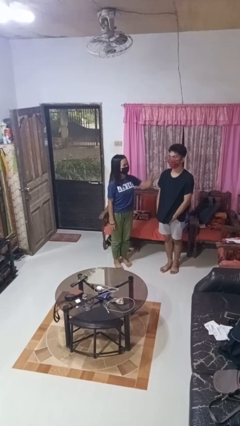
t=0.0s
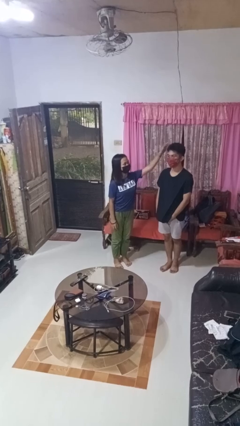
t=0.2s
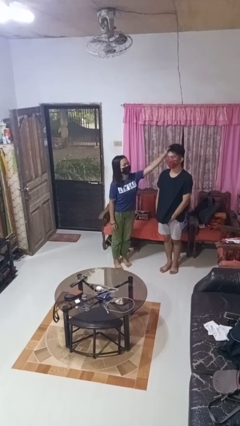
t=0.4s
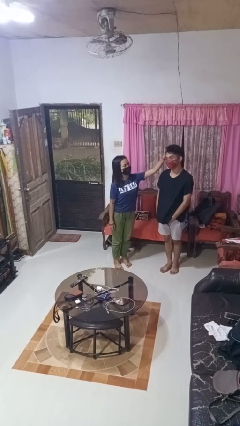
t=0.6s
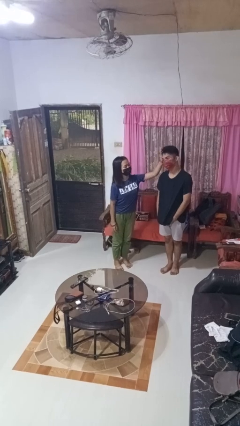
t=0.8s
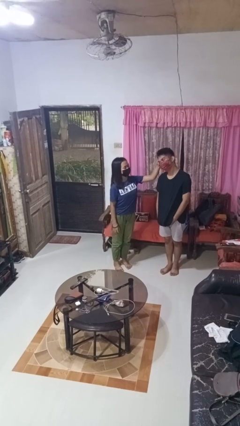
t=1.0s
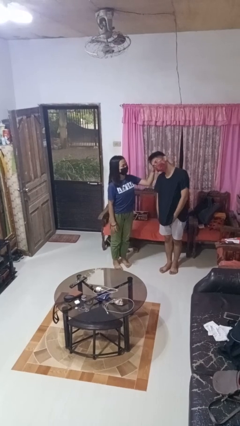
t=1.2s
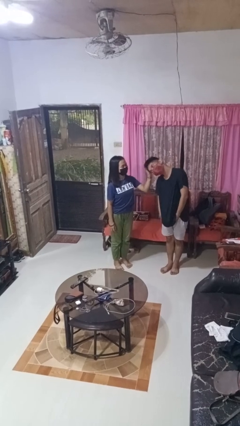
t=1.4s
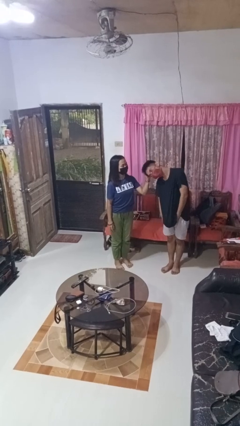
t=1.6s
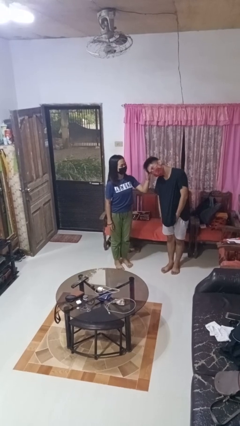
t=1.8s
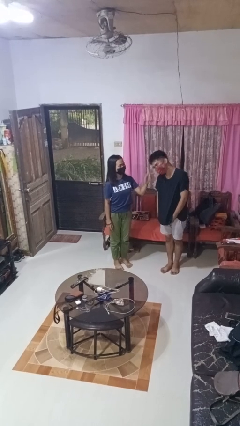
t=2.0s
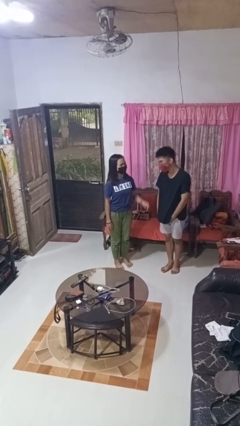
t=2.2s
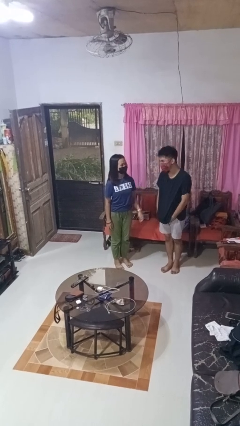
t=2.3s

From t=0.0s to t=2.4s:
person grabs person by hair

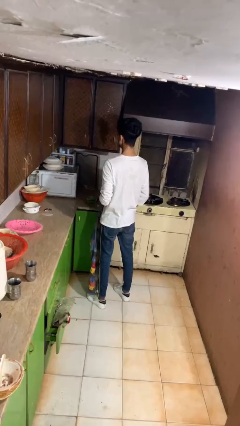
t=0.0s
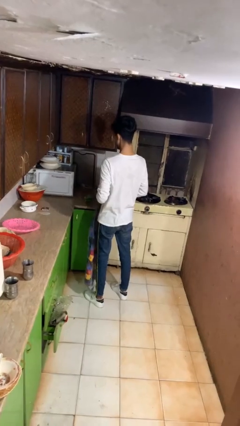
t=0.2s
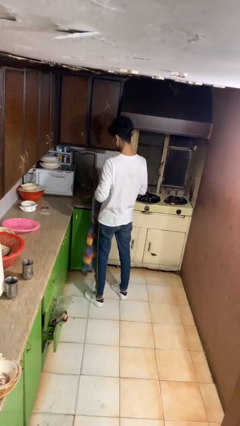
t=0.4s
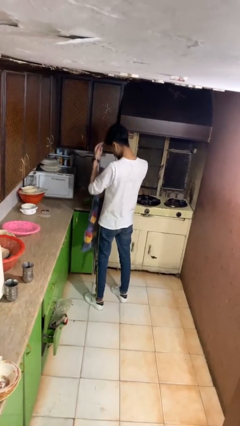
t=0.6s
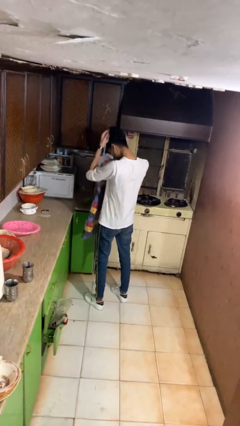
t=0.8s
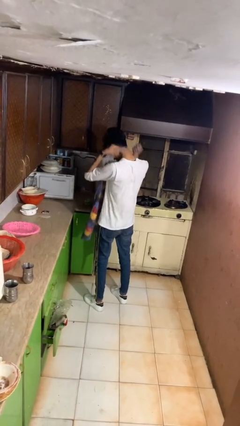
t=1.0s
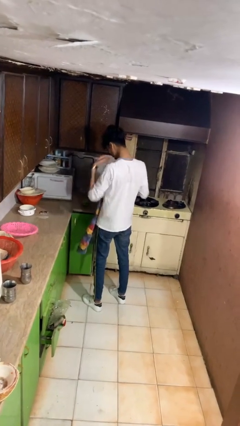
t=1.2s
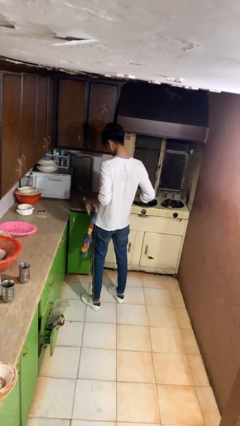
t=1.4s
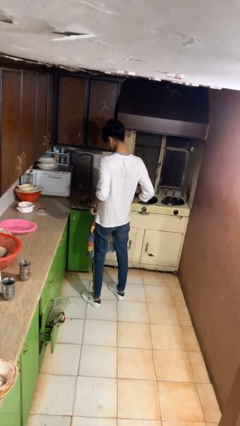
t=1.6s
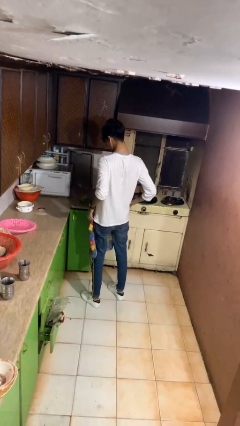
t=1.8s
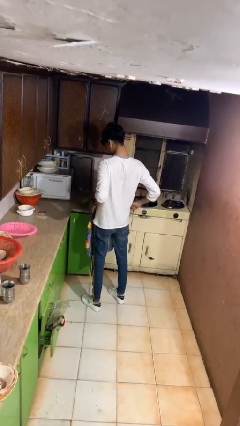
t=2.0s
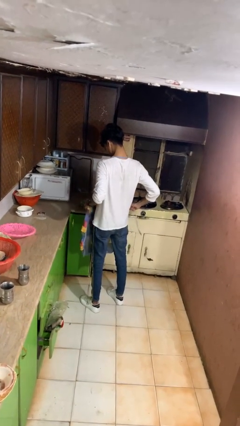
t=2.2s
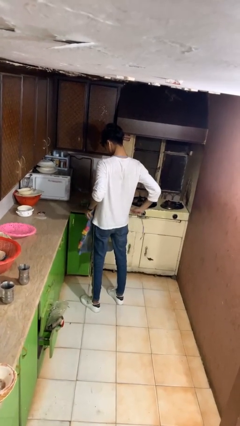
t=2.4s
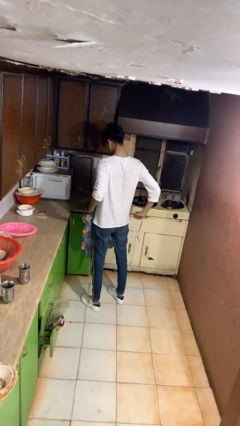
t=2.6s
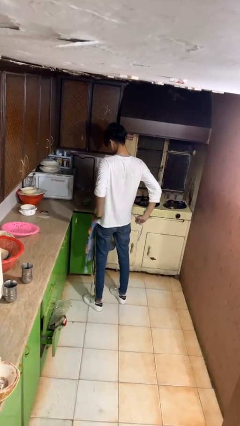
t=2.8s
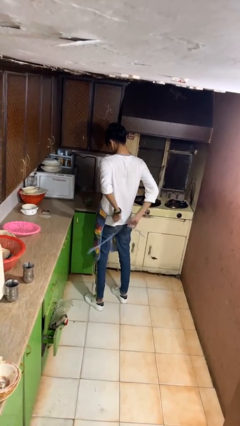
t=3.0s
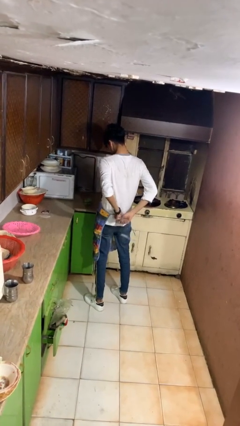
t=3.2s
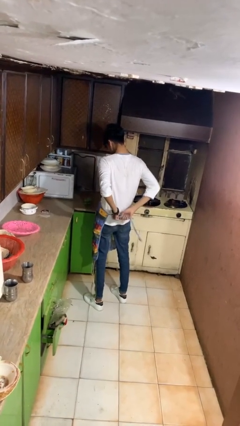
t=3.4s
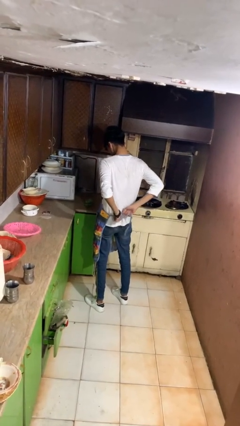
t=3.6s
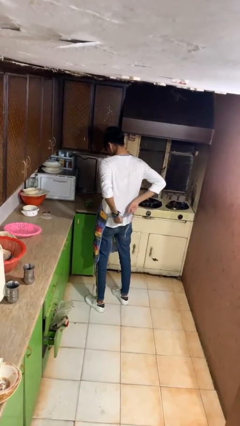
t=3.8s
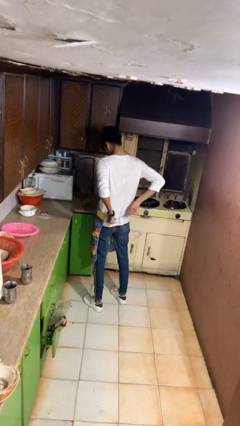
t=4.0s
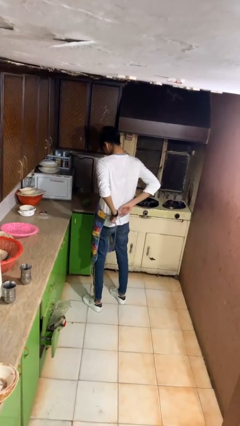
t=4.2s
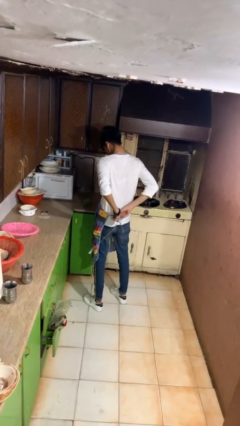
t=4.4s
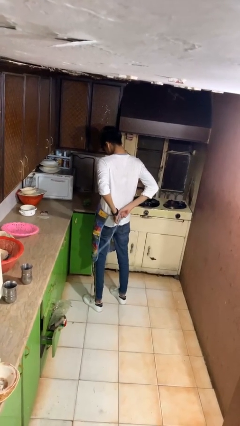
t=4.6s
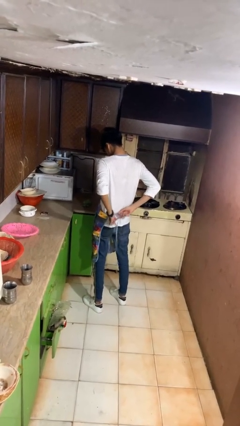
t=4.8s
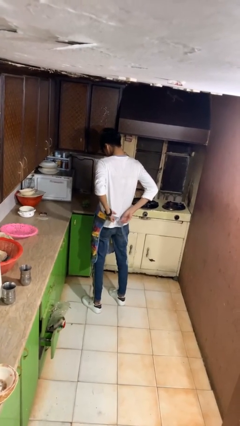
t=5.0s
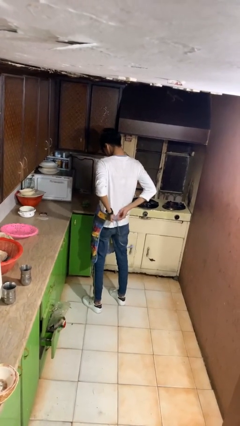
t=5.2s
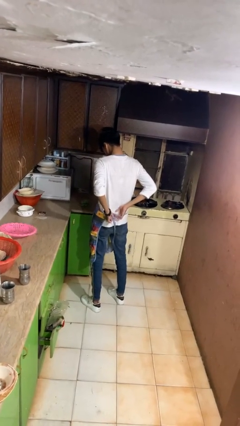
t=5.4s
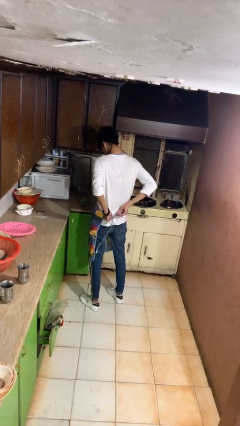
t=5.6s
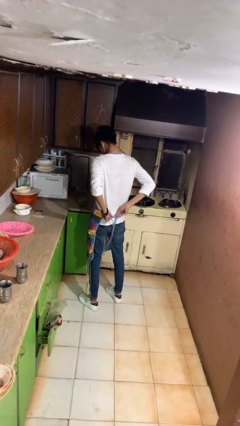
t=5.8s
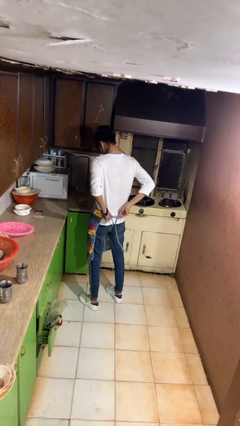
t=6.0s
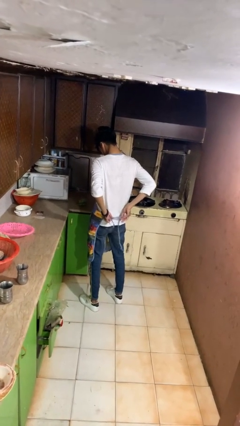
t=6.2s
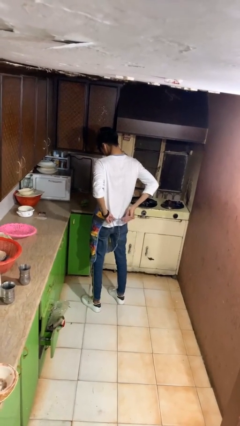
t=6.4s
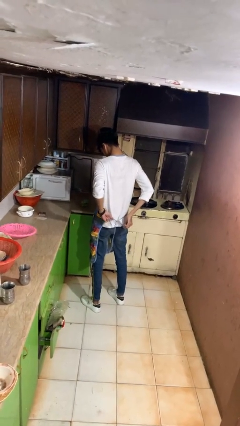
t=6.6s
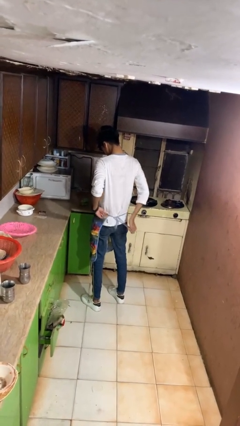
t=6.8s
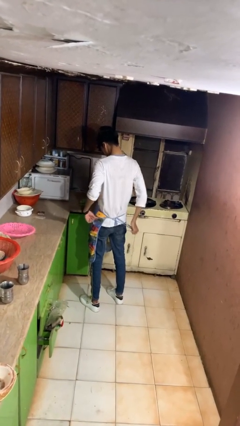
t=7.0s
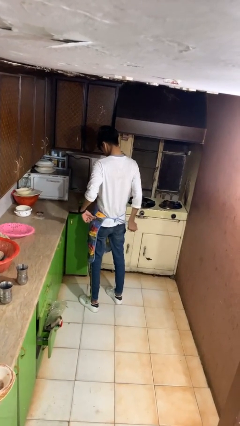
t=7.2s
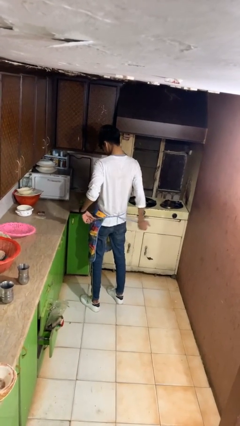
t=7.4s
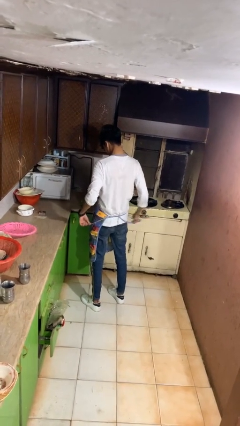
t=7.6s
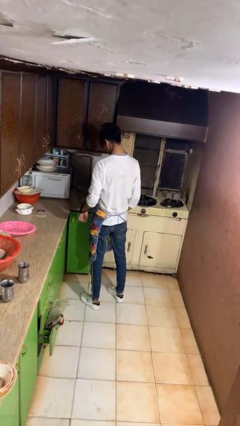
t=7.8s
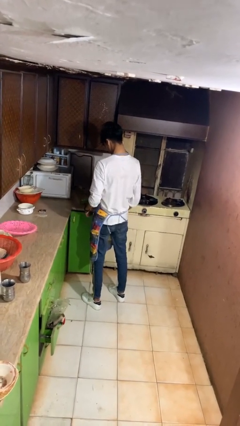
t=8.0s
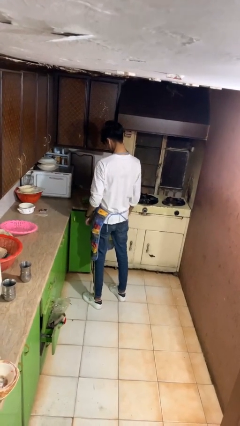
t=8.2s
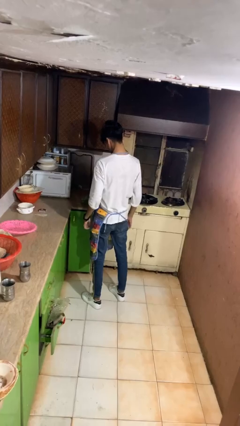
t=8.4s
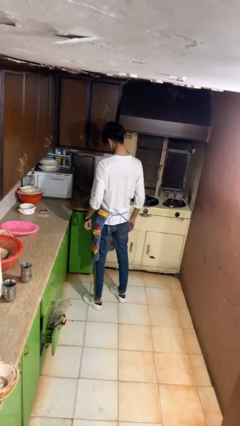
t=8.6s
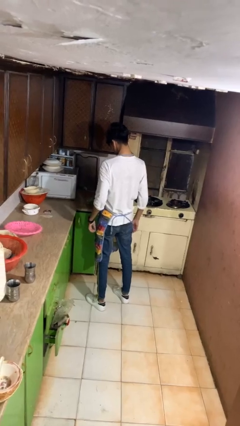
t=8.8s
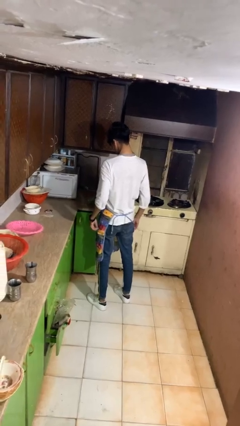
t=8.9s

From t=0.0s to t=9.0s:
person puts on apron

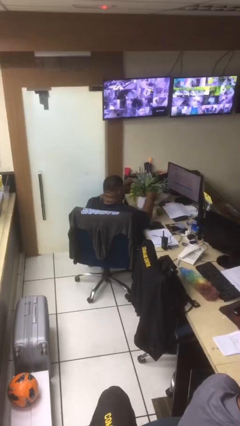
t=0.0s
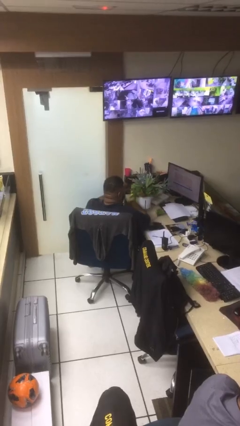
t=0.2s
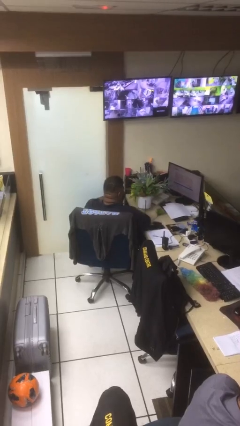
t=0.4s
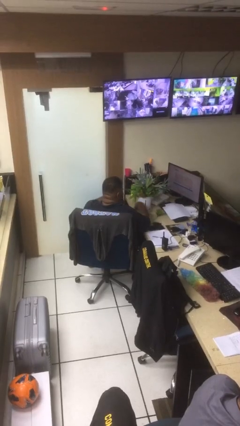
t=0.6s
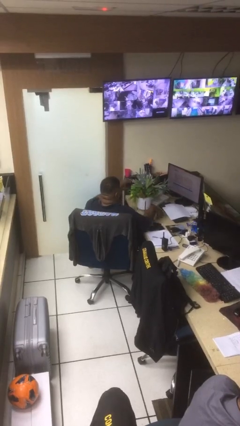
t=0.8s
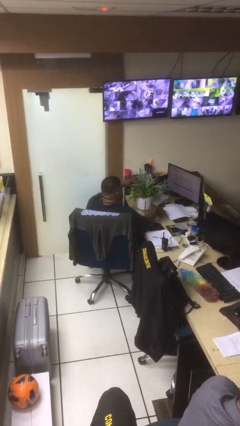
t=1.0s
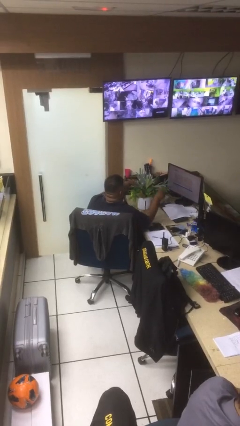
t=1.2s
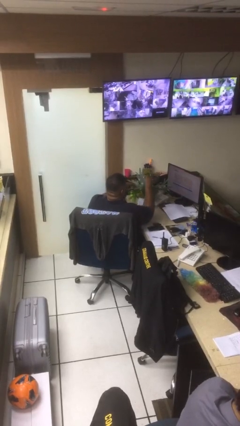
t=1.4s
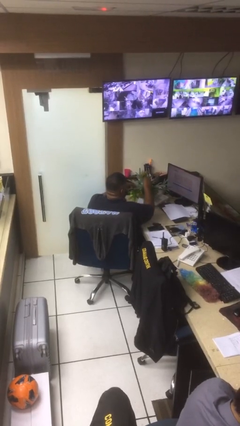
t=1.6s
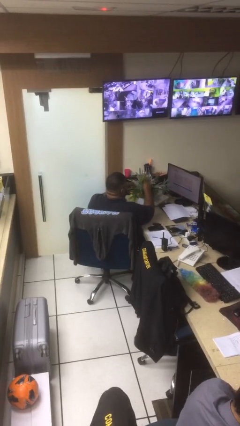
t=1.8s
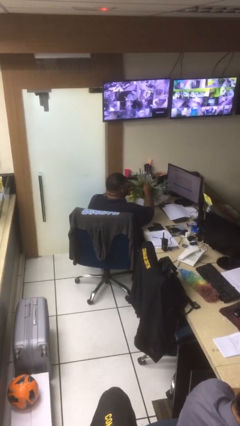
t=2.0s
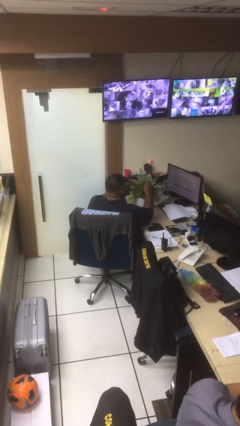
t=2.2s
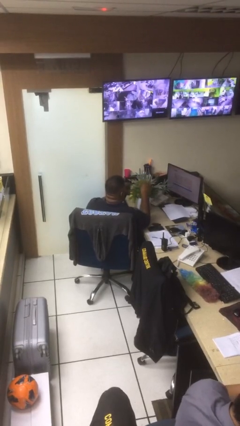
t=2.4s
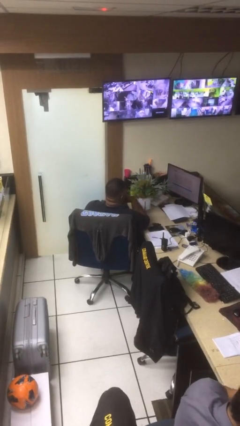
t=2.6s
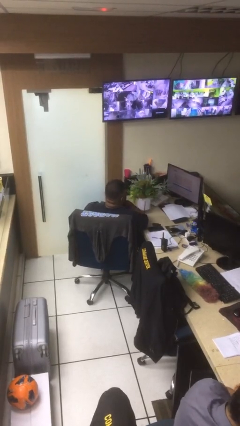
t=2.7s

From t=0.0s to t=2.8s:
person arranges flowers in vase

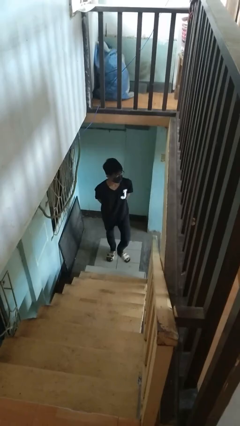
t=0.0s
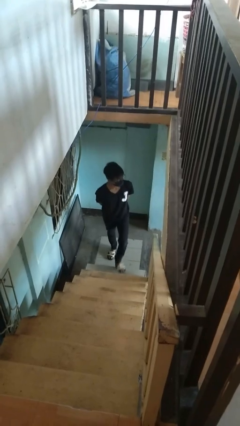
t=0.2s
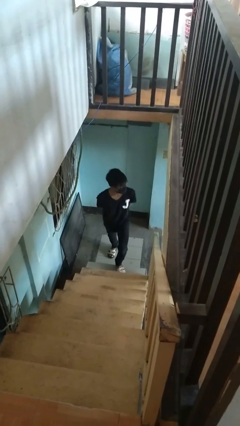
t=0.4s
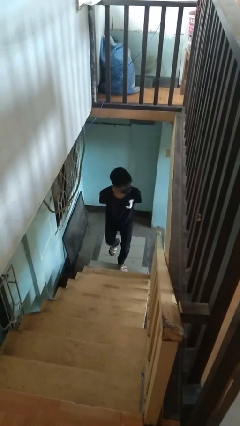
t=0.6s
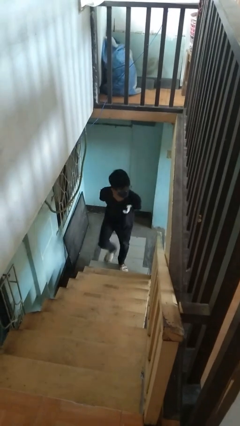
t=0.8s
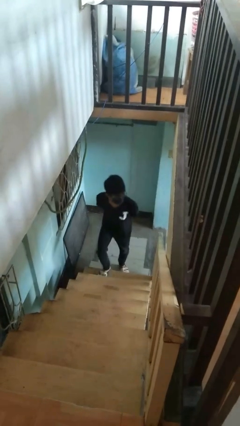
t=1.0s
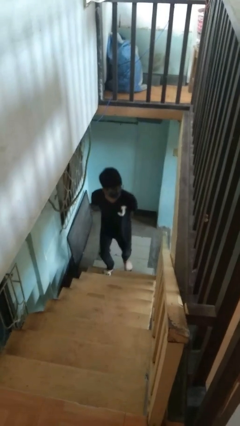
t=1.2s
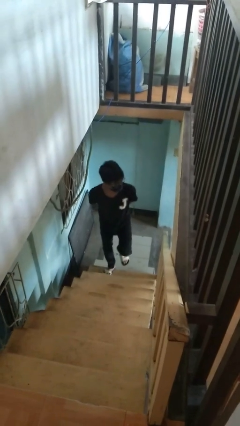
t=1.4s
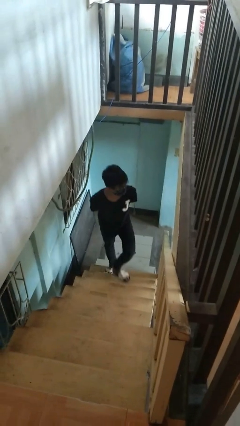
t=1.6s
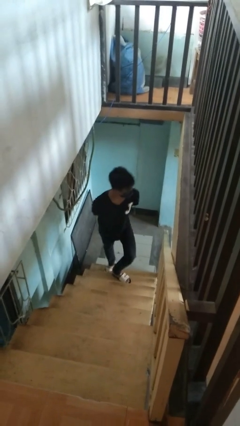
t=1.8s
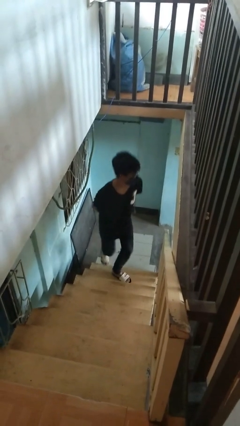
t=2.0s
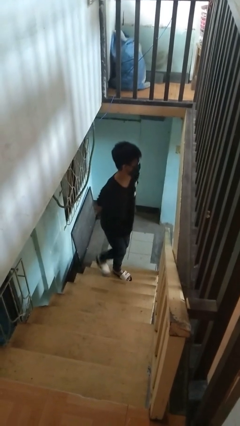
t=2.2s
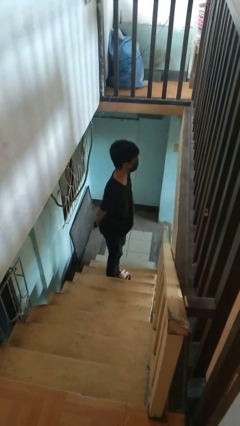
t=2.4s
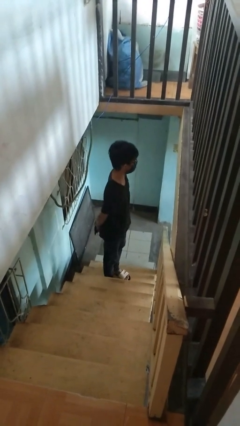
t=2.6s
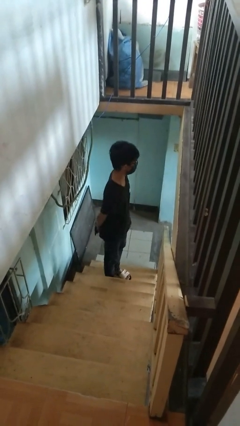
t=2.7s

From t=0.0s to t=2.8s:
person climbs up ladder

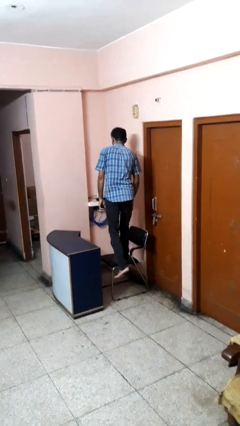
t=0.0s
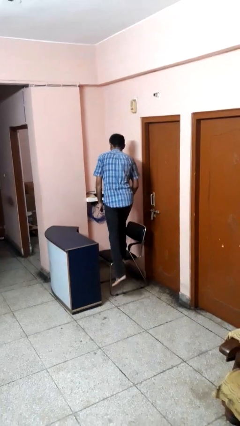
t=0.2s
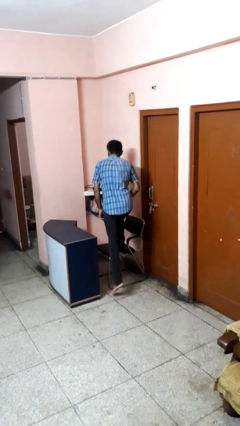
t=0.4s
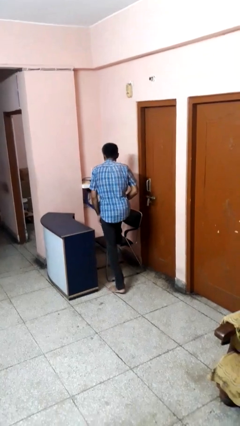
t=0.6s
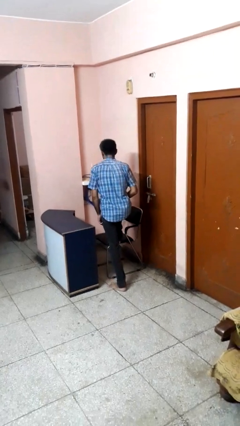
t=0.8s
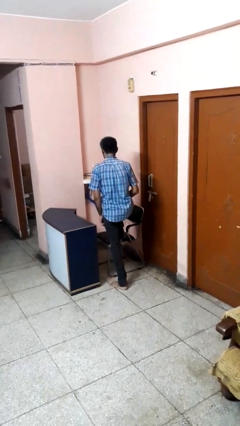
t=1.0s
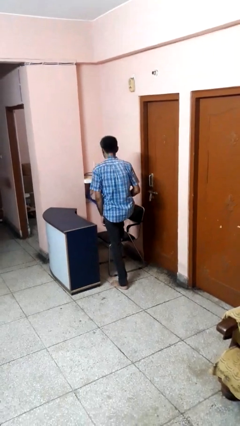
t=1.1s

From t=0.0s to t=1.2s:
person climbs off chair
